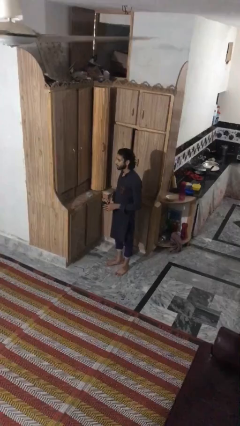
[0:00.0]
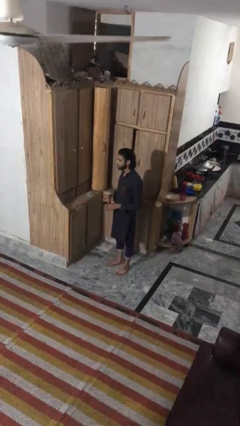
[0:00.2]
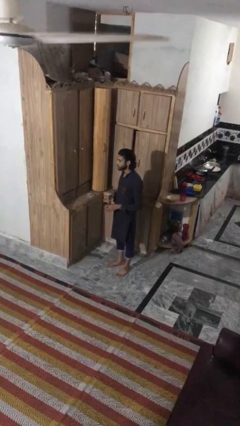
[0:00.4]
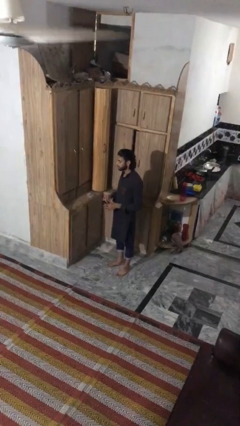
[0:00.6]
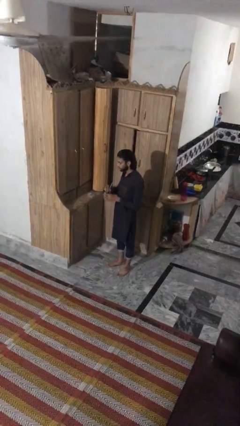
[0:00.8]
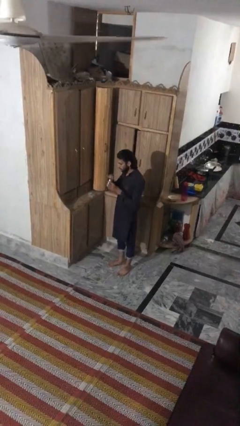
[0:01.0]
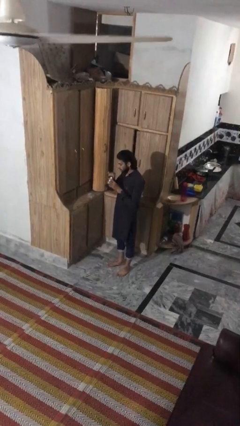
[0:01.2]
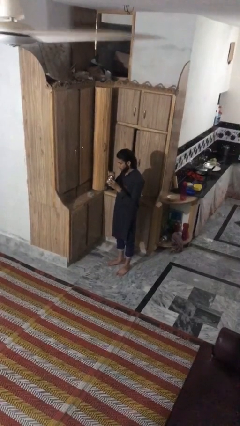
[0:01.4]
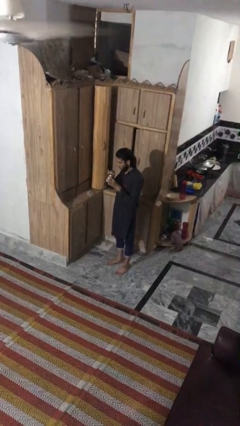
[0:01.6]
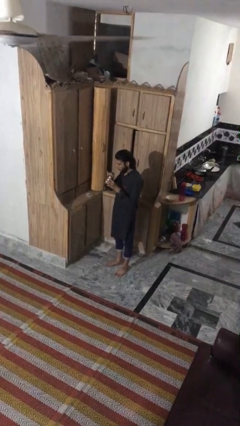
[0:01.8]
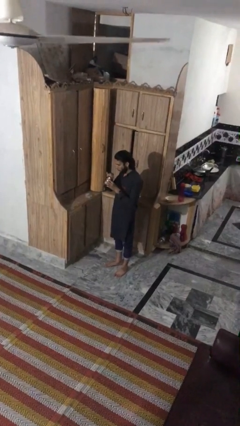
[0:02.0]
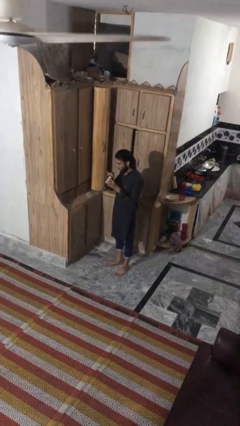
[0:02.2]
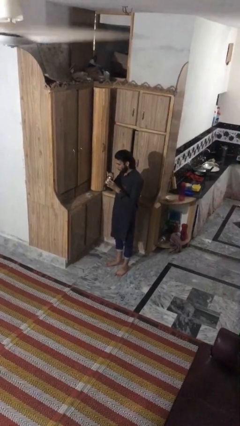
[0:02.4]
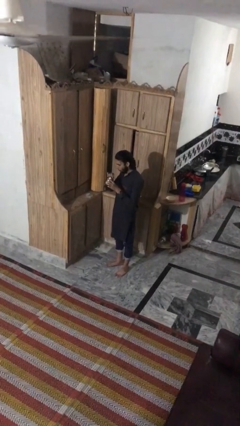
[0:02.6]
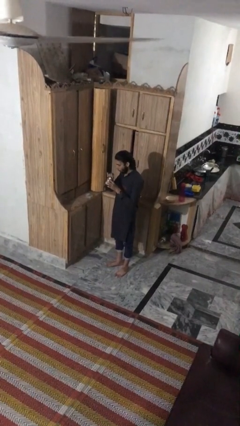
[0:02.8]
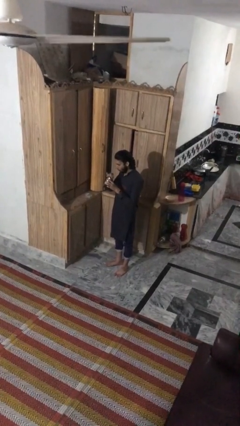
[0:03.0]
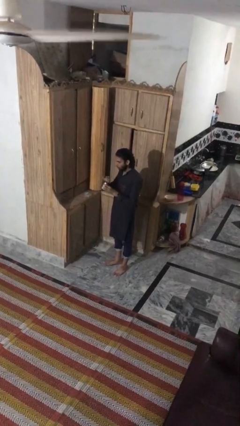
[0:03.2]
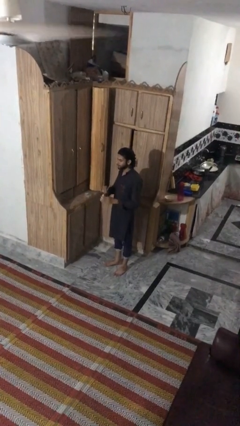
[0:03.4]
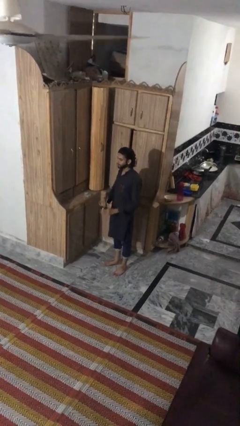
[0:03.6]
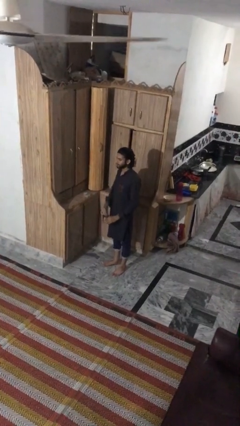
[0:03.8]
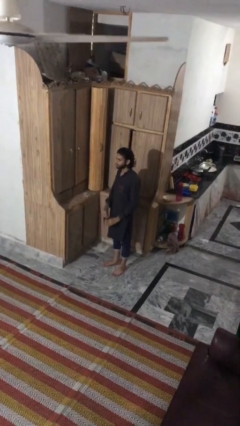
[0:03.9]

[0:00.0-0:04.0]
person drinks from straw

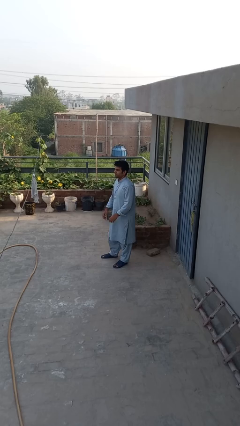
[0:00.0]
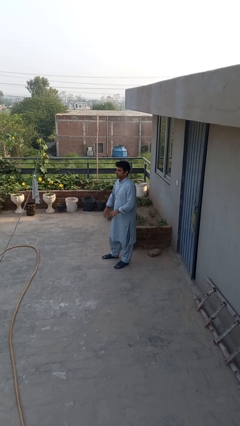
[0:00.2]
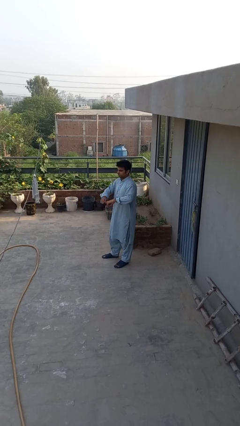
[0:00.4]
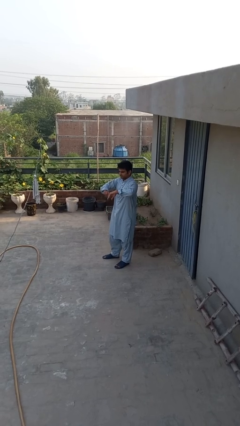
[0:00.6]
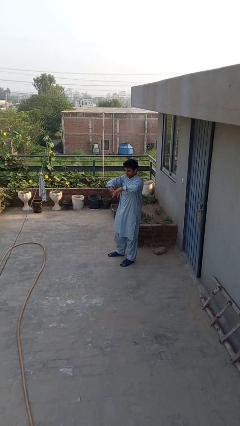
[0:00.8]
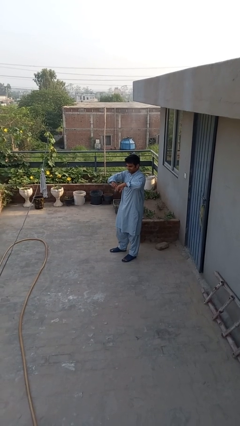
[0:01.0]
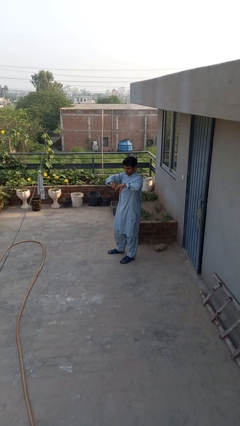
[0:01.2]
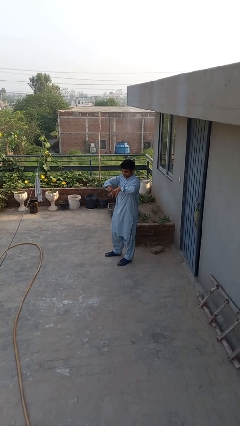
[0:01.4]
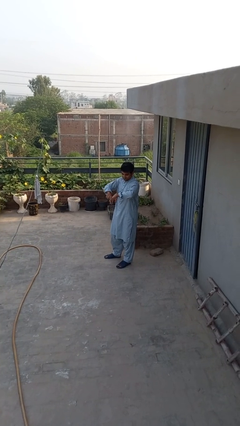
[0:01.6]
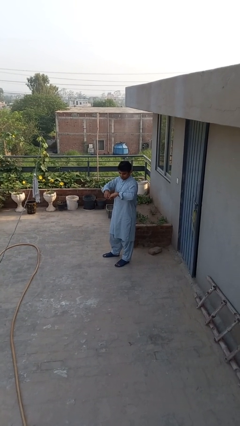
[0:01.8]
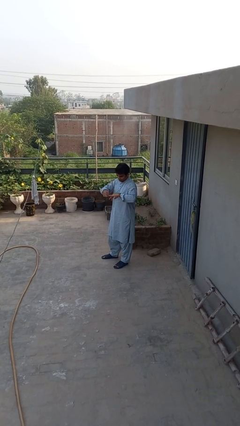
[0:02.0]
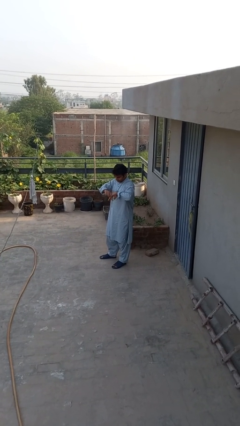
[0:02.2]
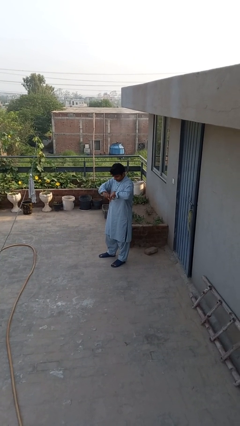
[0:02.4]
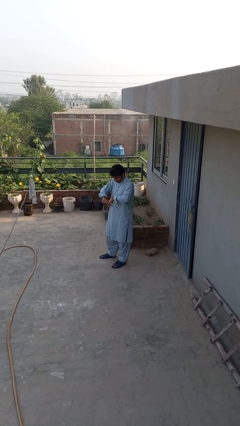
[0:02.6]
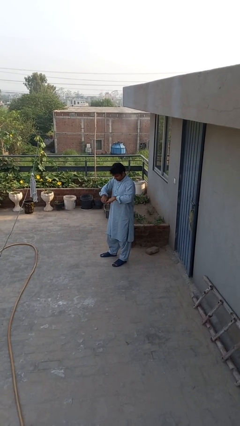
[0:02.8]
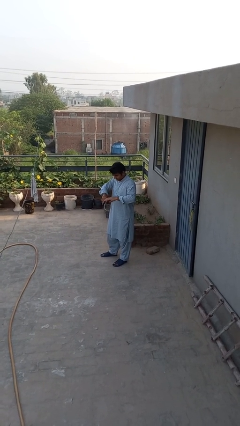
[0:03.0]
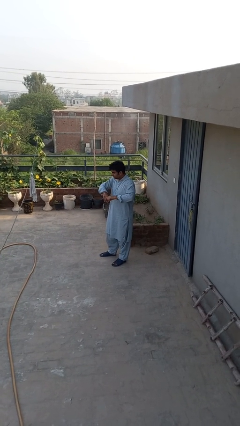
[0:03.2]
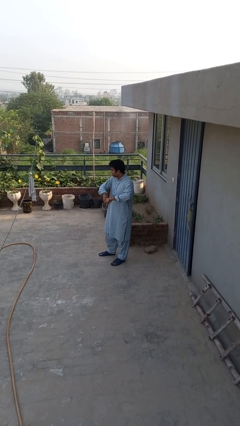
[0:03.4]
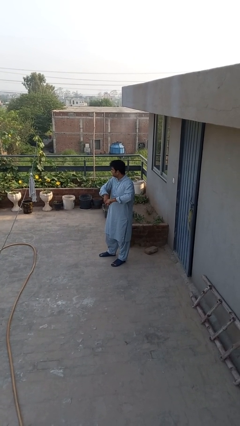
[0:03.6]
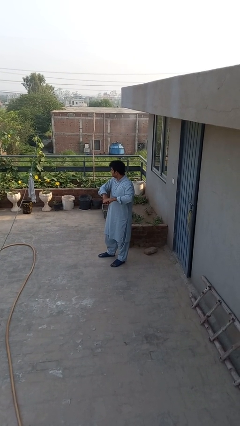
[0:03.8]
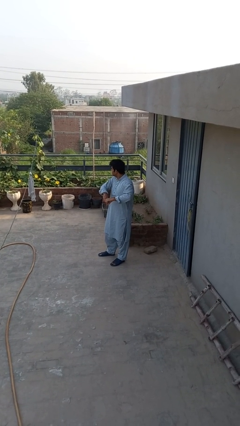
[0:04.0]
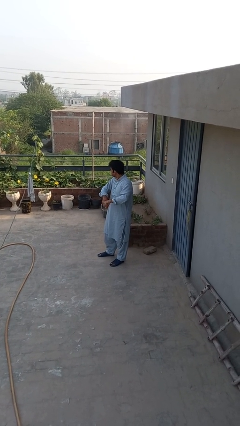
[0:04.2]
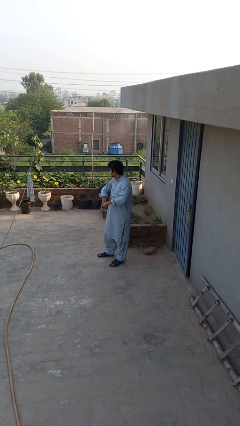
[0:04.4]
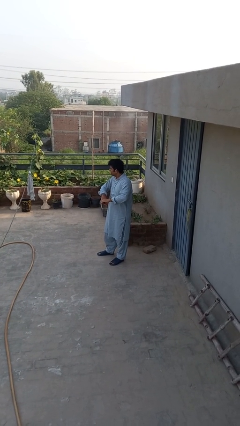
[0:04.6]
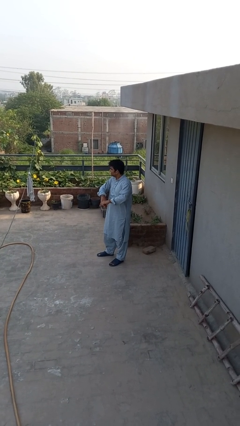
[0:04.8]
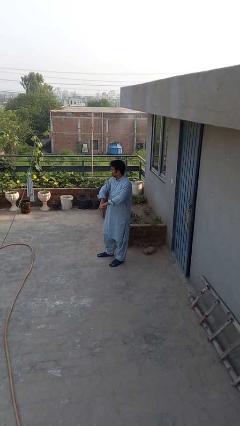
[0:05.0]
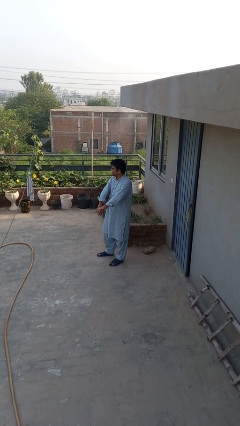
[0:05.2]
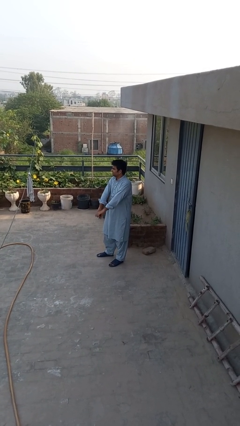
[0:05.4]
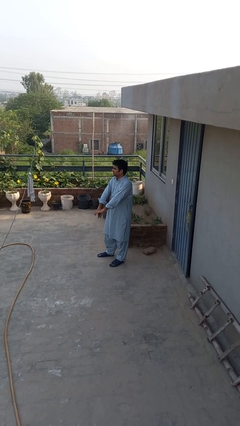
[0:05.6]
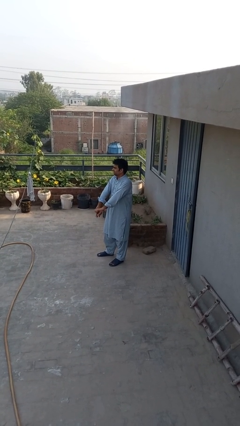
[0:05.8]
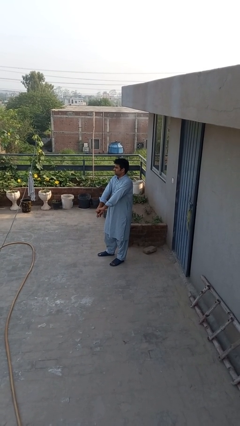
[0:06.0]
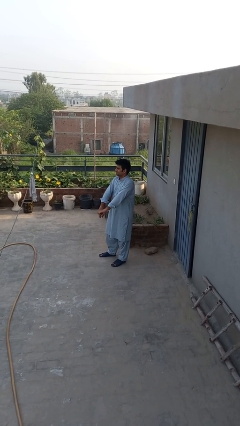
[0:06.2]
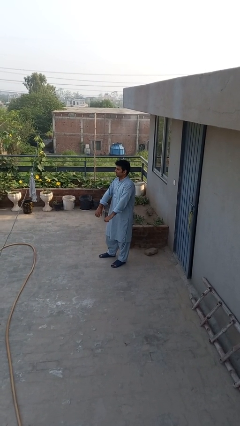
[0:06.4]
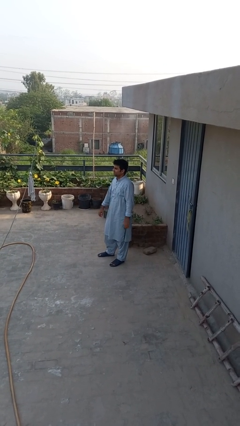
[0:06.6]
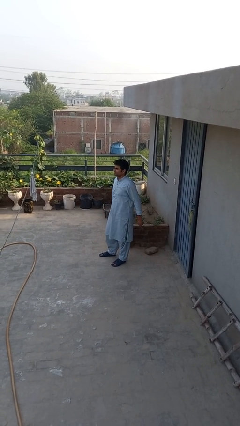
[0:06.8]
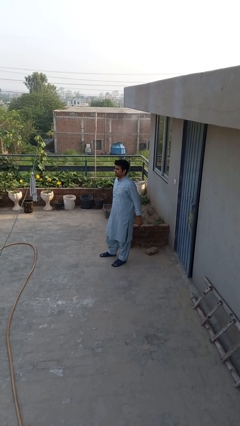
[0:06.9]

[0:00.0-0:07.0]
person cracks knuckles

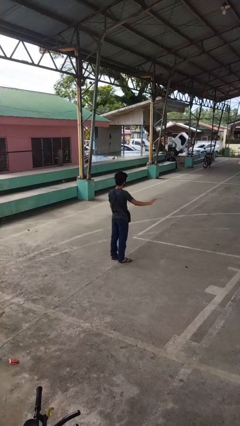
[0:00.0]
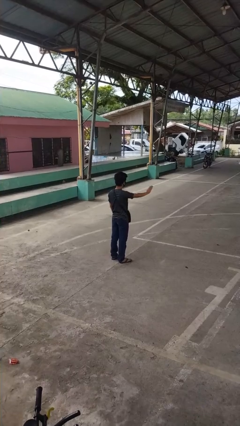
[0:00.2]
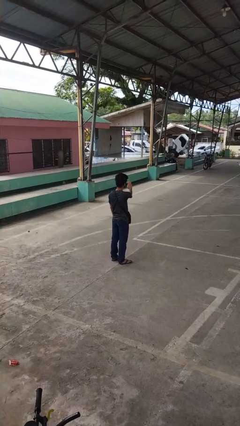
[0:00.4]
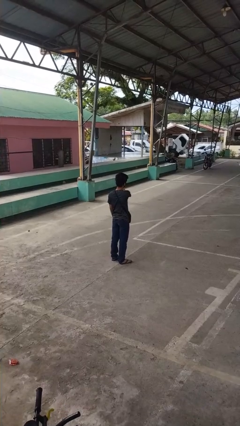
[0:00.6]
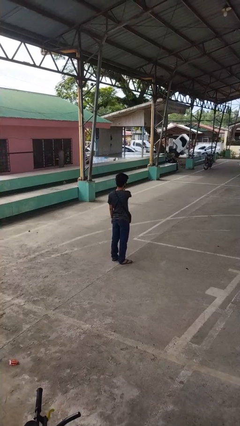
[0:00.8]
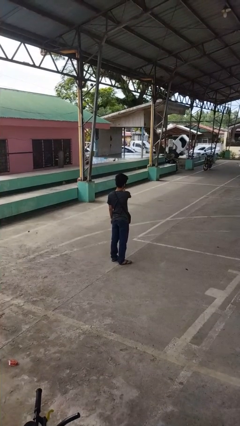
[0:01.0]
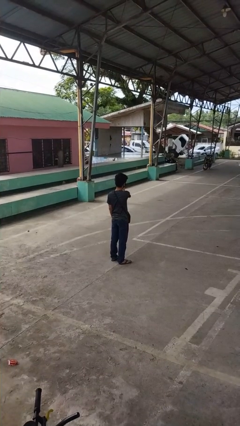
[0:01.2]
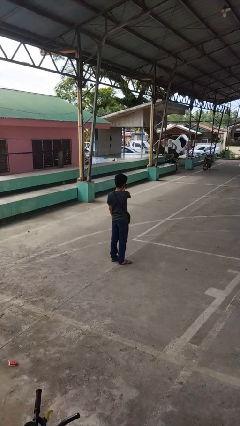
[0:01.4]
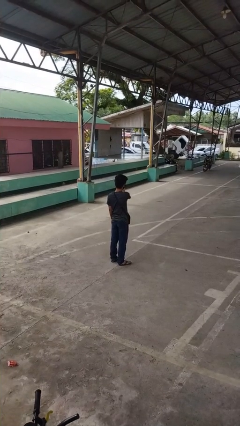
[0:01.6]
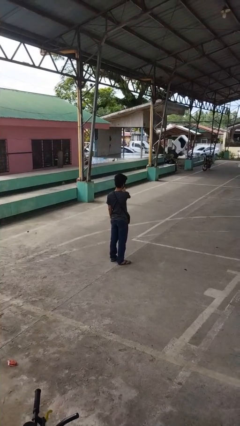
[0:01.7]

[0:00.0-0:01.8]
person gestures swipe left

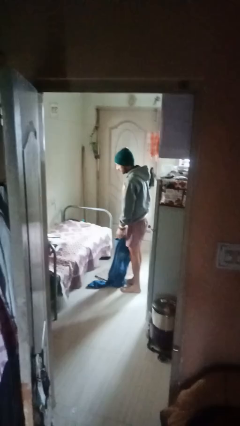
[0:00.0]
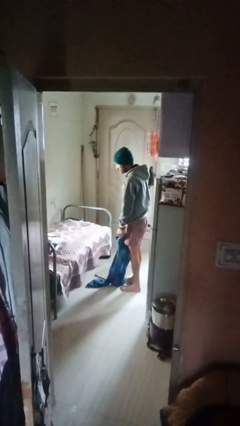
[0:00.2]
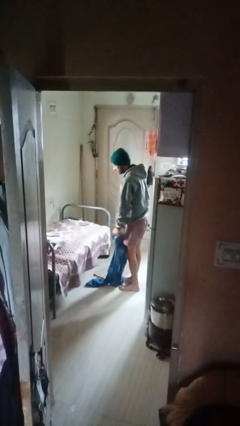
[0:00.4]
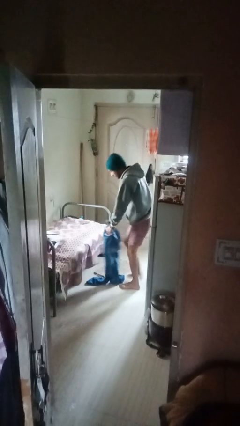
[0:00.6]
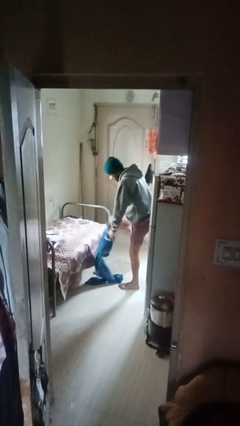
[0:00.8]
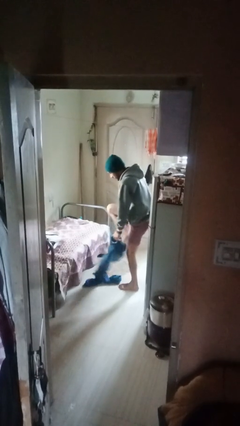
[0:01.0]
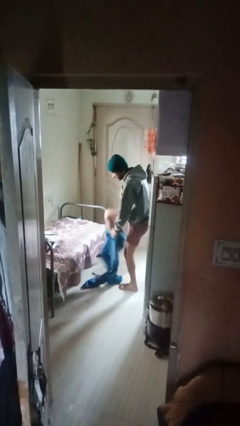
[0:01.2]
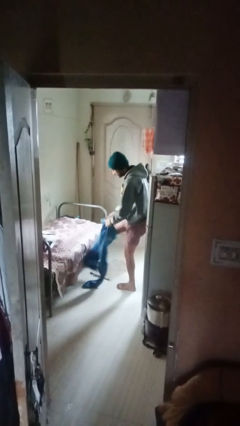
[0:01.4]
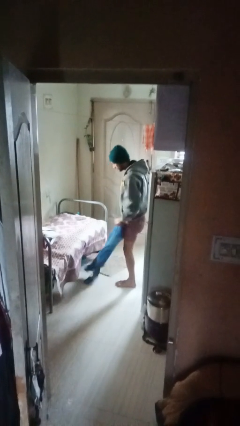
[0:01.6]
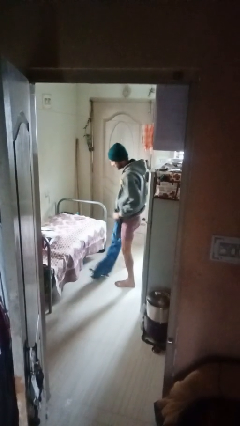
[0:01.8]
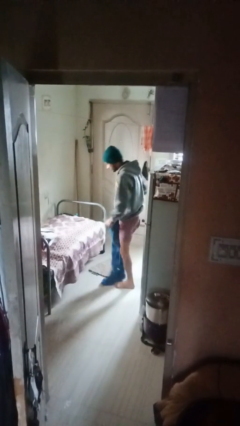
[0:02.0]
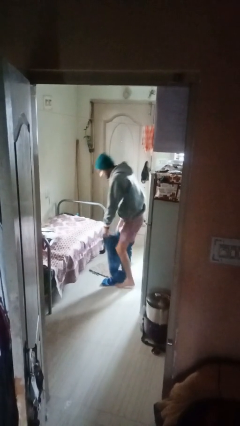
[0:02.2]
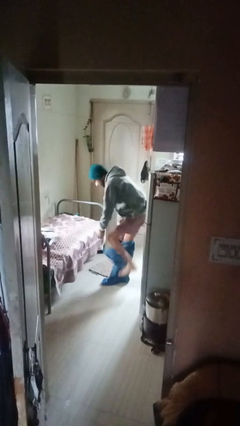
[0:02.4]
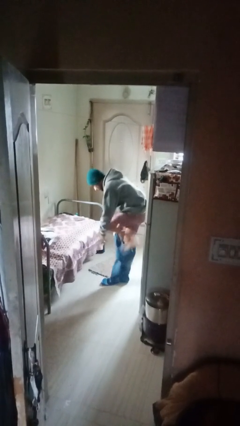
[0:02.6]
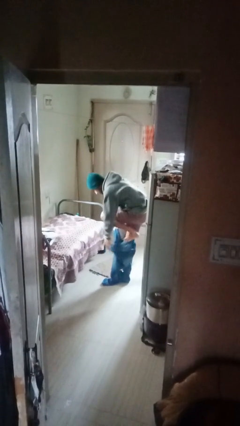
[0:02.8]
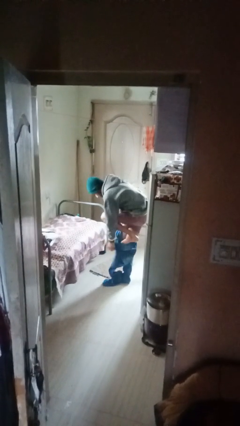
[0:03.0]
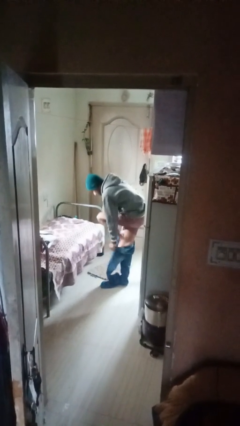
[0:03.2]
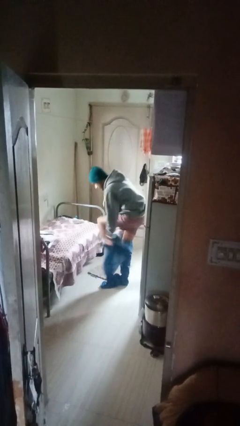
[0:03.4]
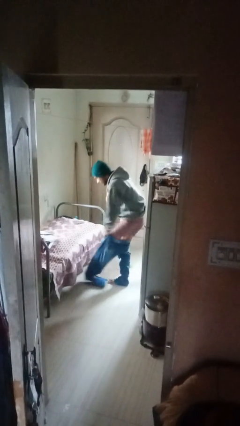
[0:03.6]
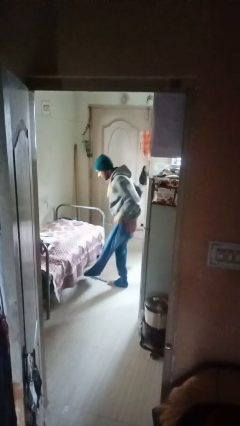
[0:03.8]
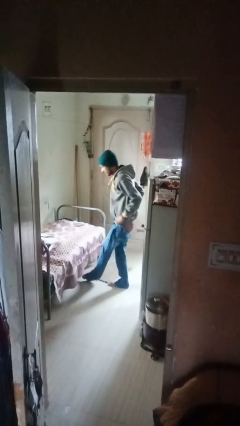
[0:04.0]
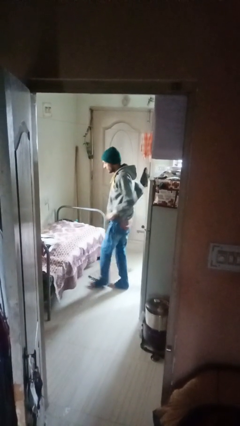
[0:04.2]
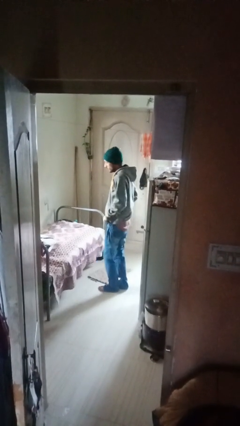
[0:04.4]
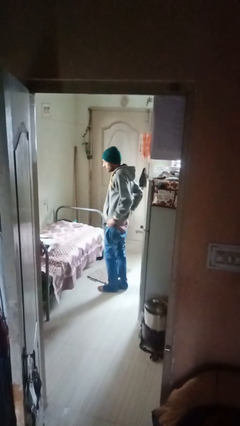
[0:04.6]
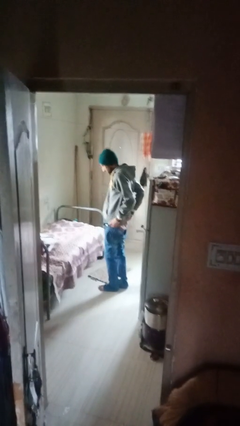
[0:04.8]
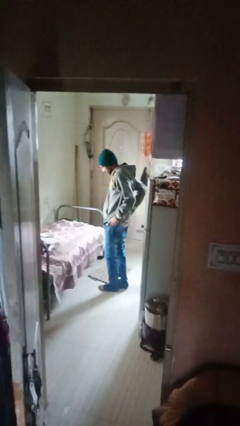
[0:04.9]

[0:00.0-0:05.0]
person puts on pants
